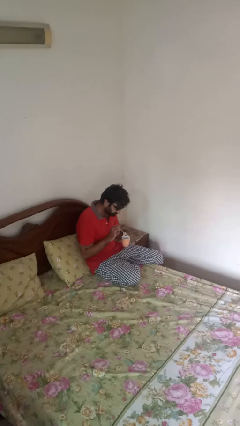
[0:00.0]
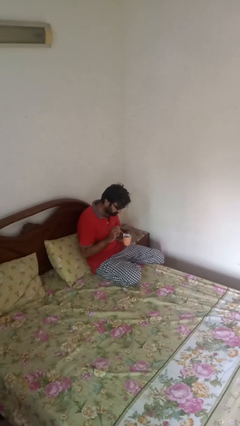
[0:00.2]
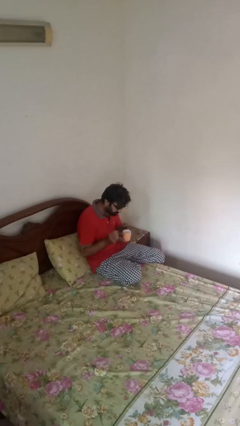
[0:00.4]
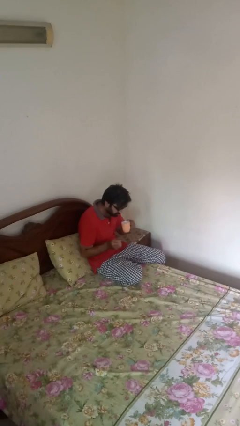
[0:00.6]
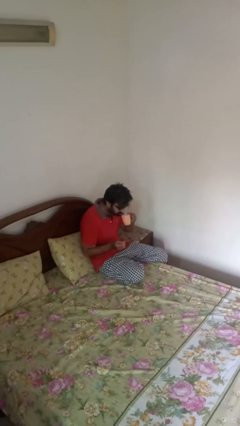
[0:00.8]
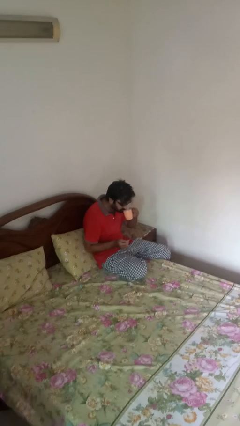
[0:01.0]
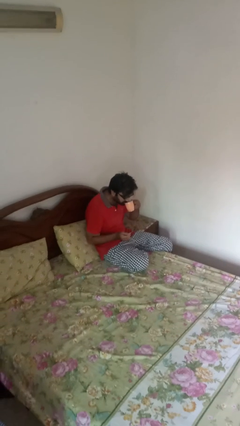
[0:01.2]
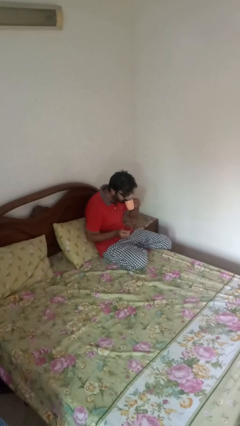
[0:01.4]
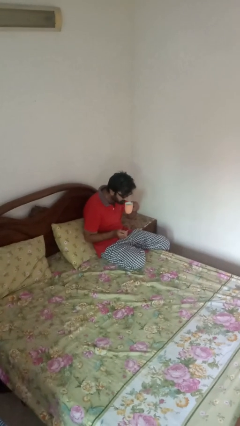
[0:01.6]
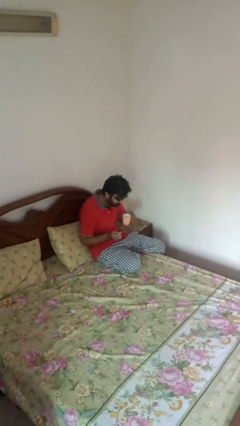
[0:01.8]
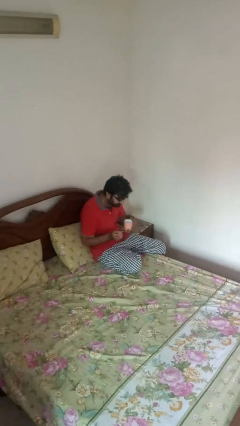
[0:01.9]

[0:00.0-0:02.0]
person drinks from mug

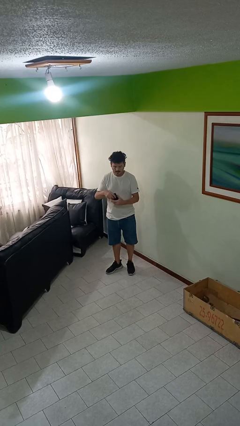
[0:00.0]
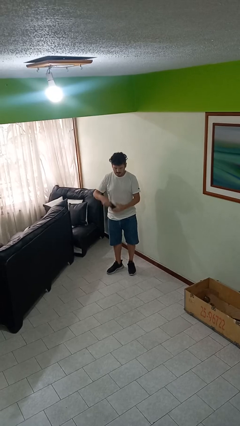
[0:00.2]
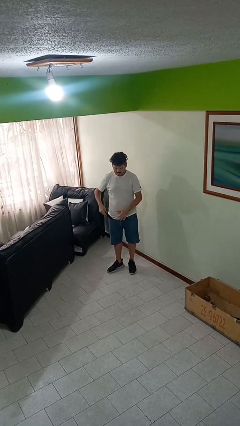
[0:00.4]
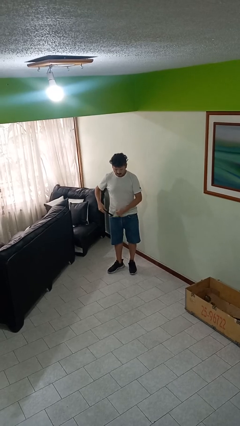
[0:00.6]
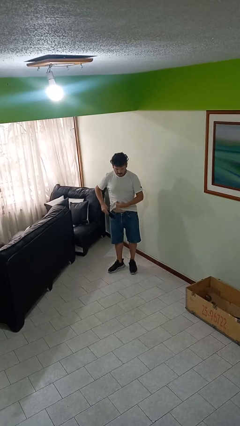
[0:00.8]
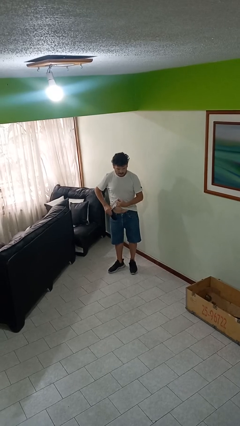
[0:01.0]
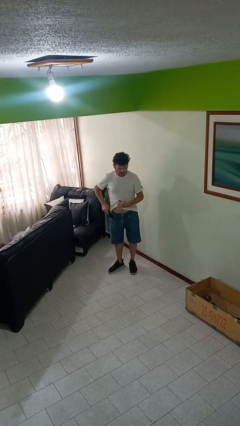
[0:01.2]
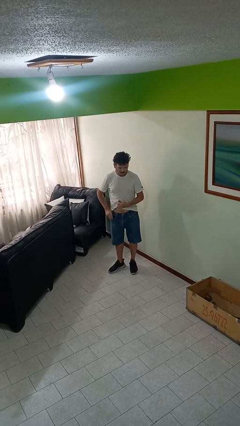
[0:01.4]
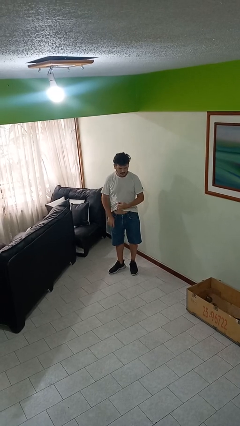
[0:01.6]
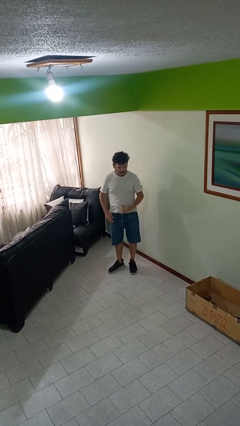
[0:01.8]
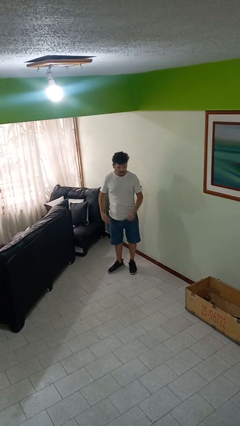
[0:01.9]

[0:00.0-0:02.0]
person puts phone into pocket

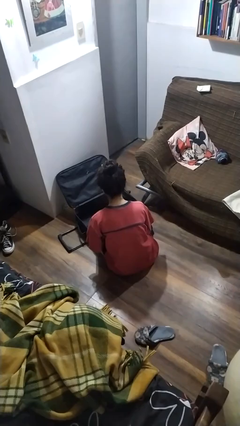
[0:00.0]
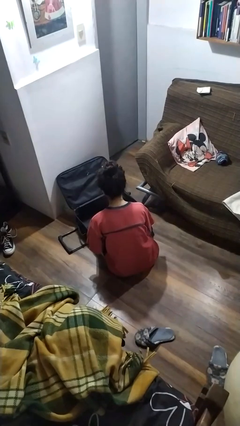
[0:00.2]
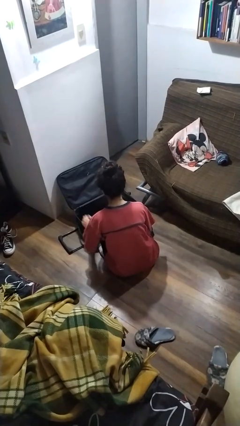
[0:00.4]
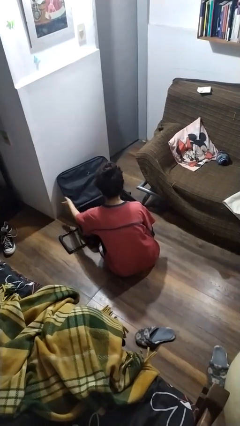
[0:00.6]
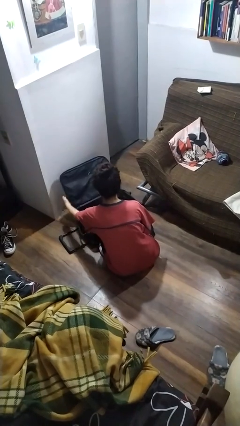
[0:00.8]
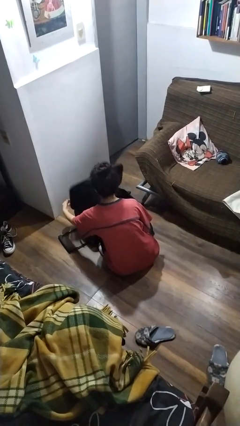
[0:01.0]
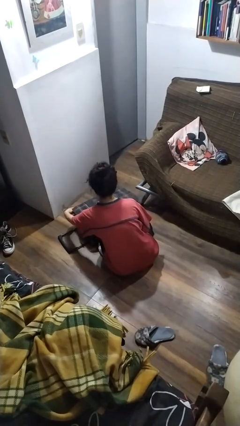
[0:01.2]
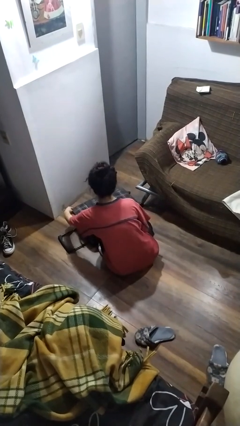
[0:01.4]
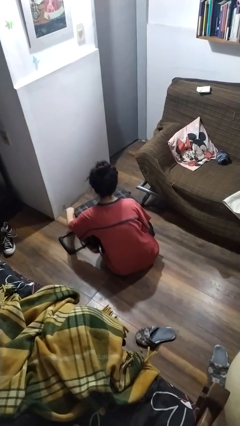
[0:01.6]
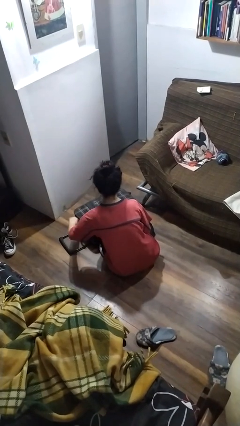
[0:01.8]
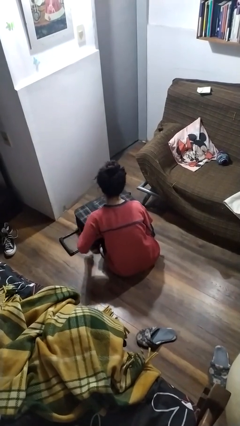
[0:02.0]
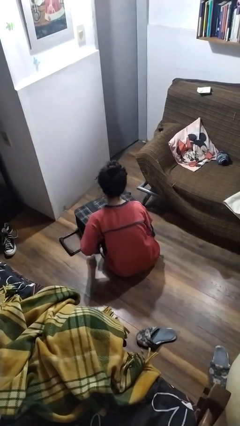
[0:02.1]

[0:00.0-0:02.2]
person closes suitcase

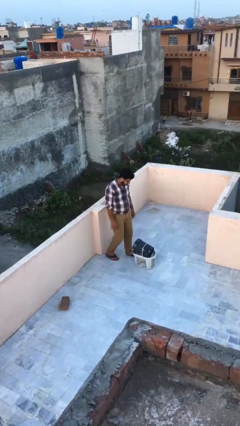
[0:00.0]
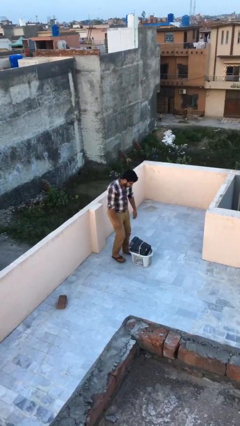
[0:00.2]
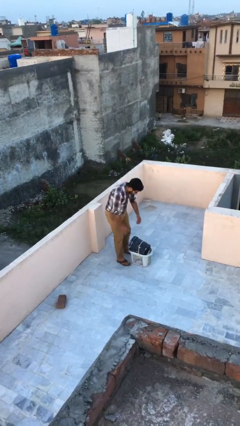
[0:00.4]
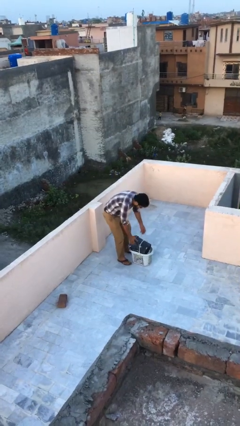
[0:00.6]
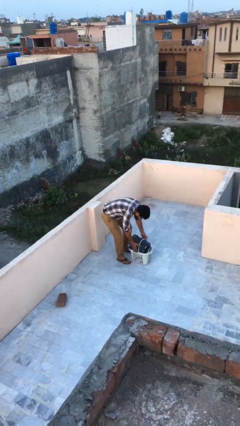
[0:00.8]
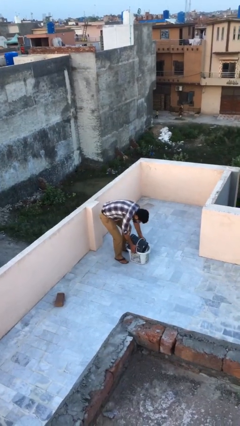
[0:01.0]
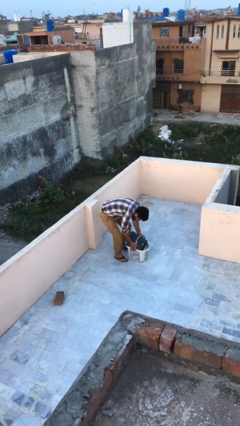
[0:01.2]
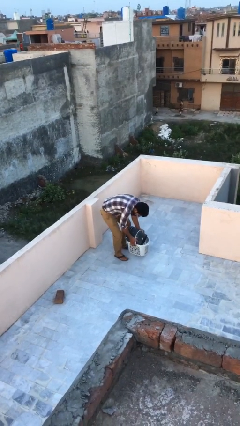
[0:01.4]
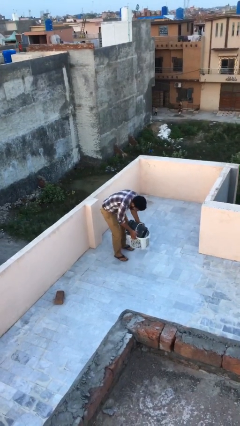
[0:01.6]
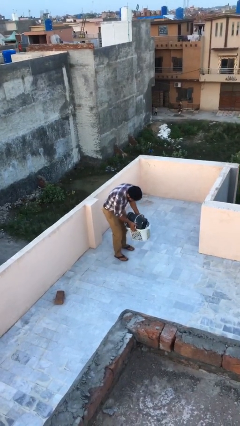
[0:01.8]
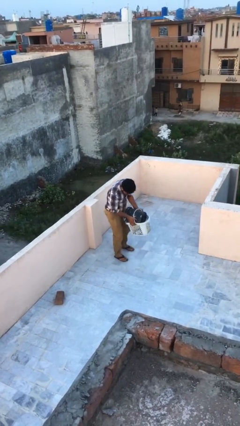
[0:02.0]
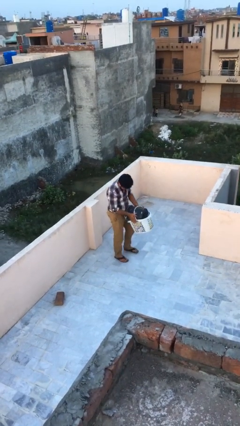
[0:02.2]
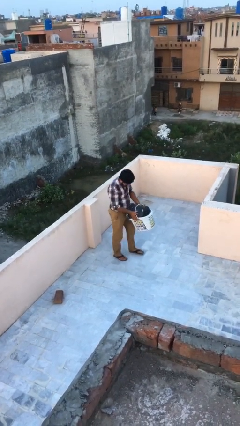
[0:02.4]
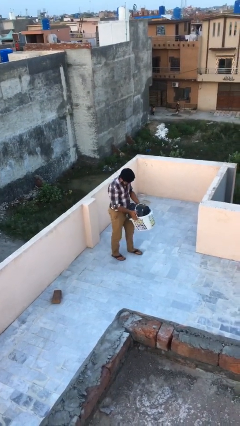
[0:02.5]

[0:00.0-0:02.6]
person picks up object from floor

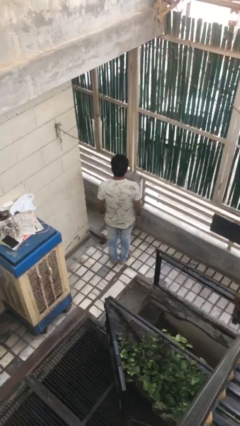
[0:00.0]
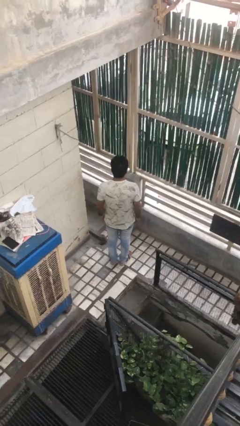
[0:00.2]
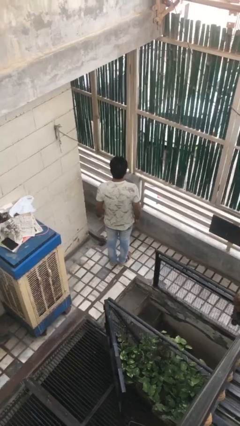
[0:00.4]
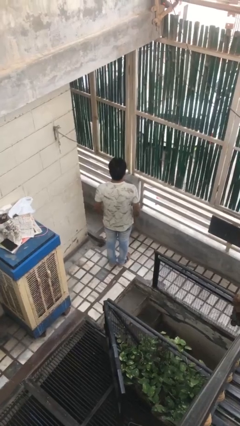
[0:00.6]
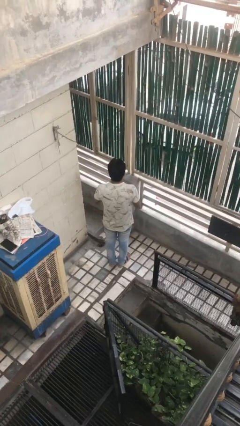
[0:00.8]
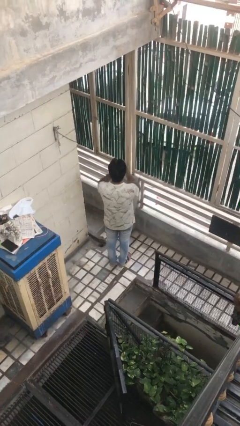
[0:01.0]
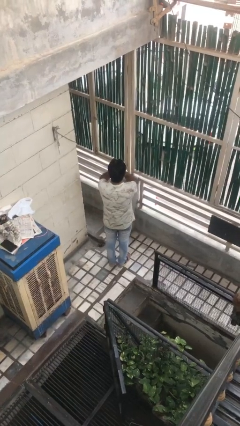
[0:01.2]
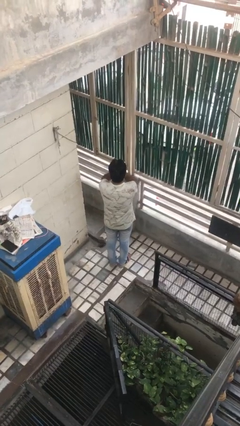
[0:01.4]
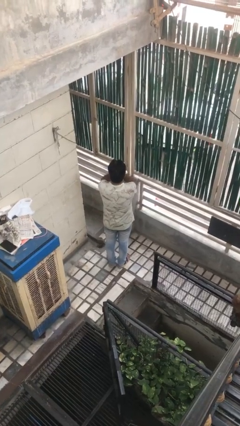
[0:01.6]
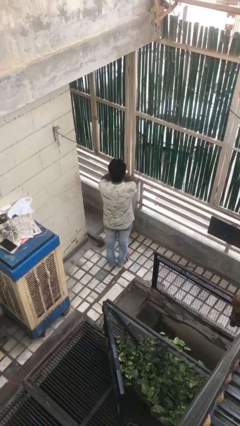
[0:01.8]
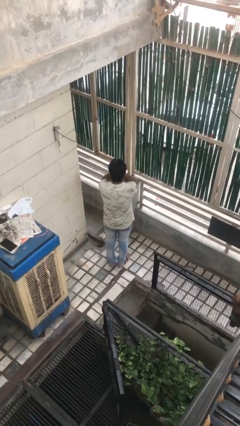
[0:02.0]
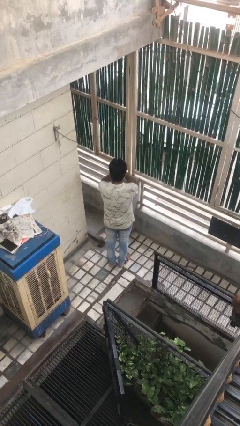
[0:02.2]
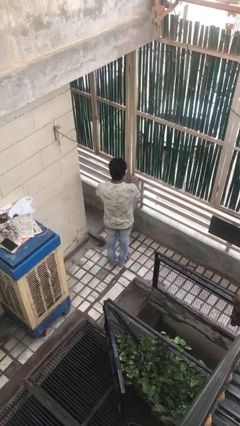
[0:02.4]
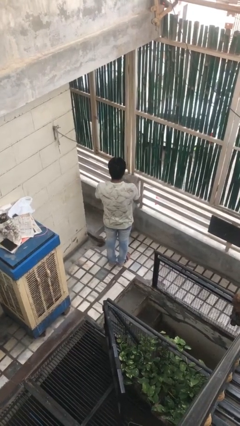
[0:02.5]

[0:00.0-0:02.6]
person covers face with hands

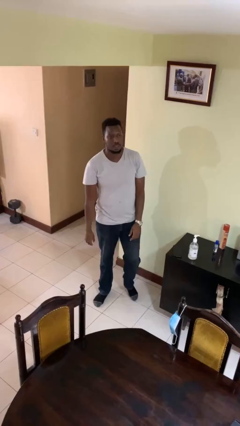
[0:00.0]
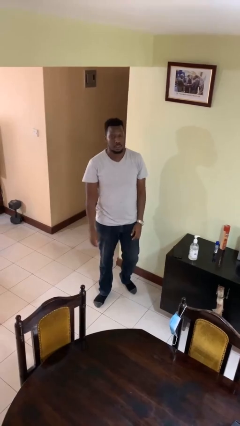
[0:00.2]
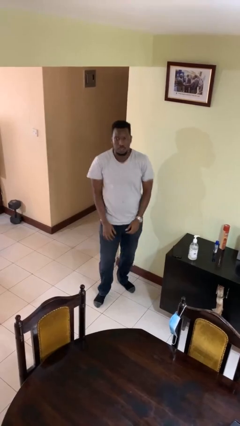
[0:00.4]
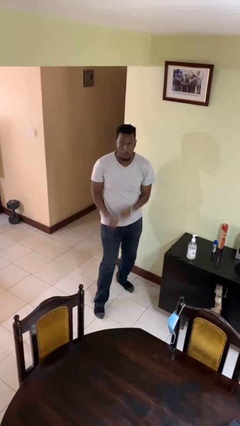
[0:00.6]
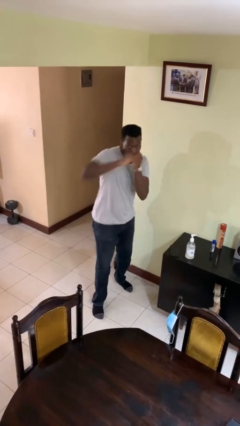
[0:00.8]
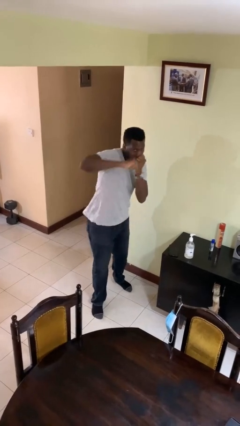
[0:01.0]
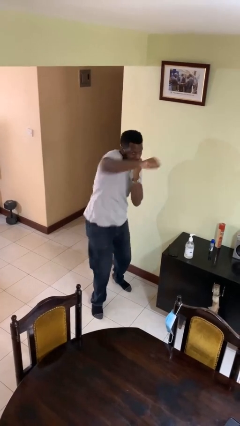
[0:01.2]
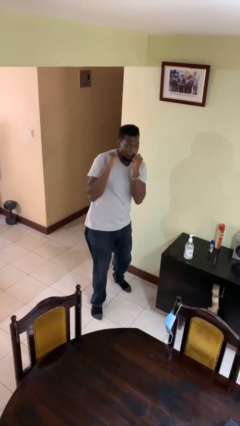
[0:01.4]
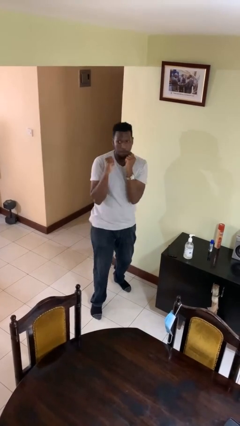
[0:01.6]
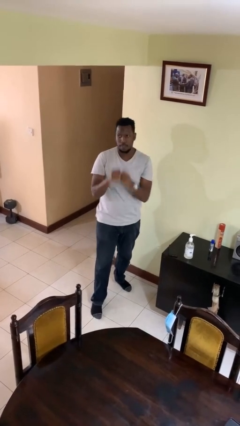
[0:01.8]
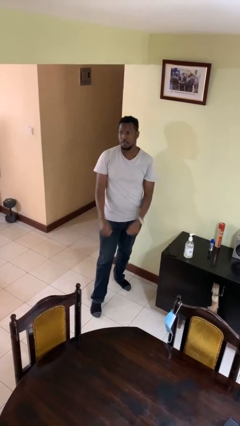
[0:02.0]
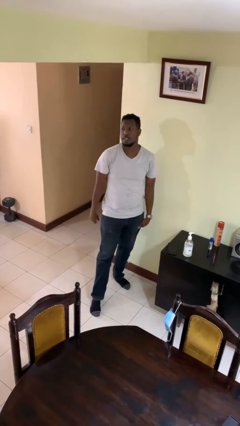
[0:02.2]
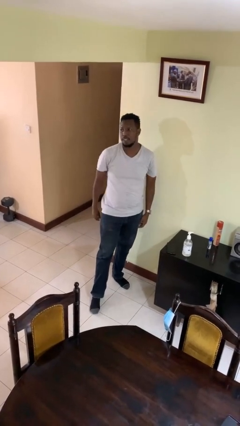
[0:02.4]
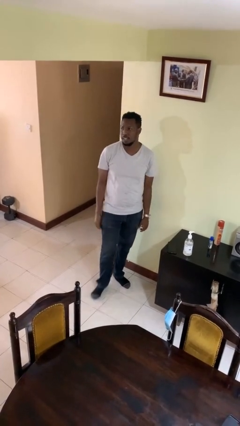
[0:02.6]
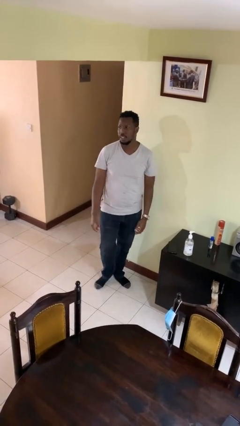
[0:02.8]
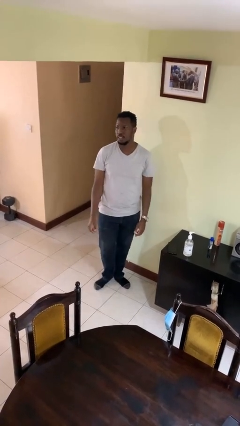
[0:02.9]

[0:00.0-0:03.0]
person punches

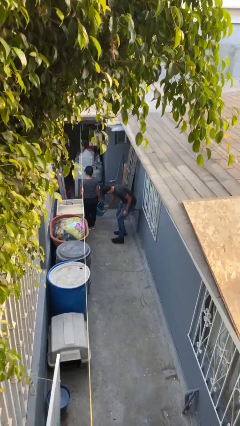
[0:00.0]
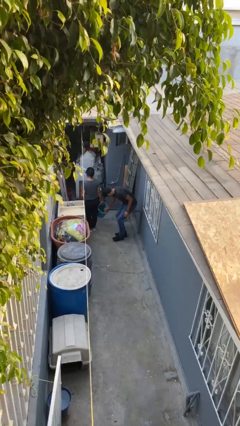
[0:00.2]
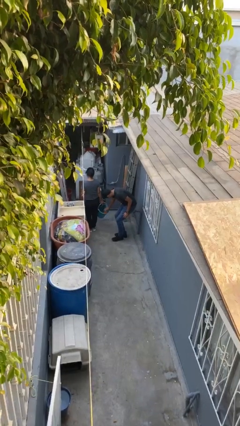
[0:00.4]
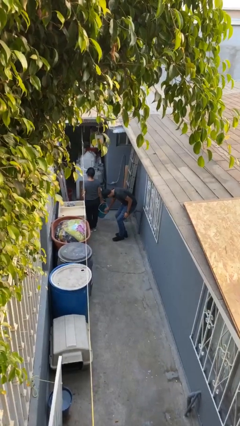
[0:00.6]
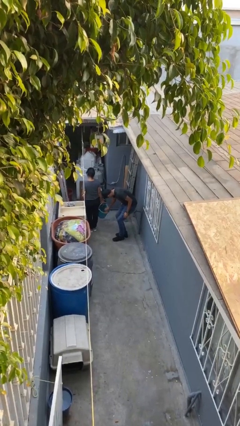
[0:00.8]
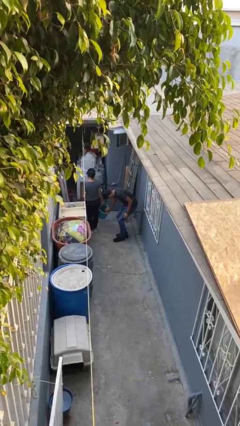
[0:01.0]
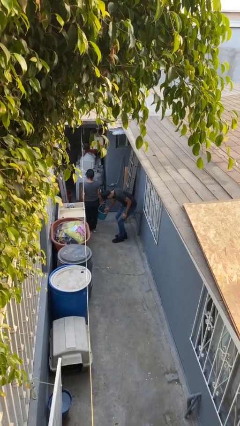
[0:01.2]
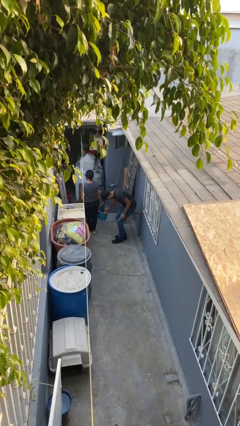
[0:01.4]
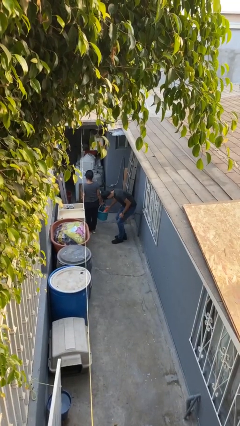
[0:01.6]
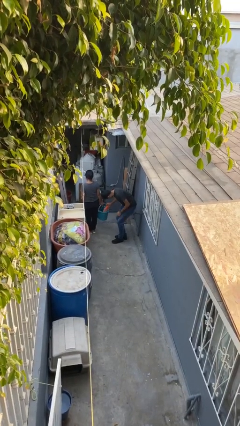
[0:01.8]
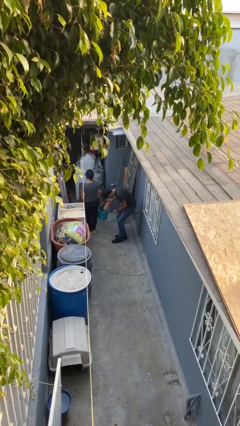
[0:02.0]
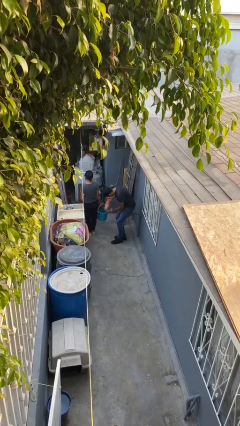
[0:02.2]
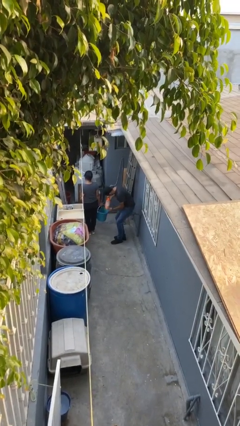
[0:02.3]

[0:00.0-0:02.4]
person steals object from person

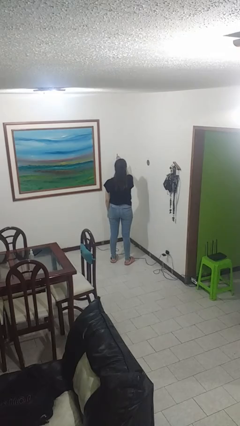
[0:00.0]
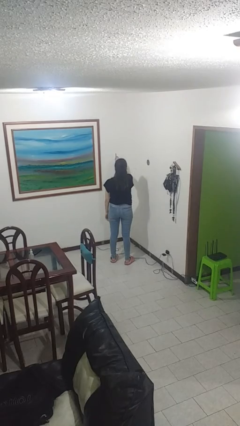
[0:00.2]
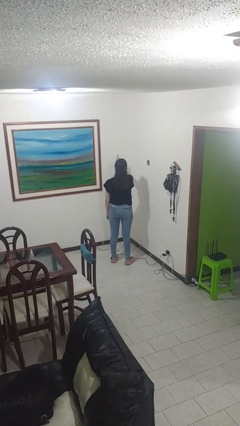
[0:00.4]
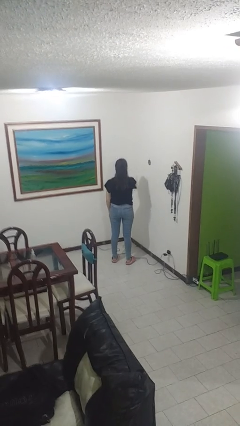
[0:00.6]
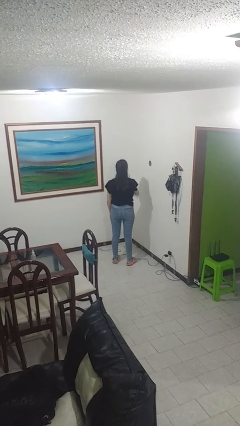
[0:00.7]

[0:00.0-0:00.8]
person gestures number one
